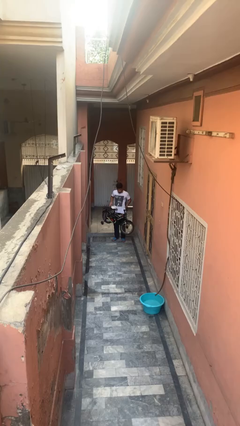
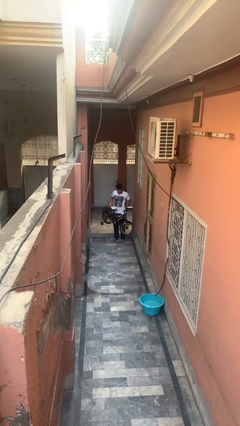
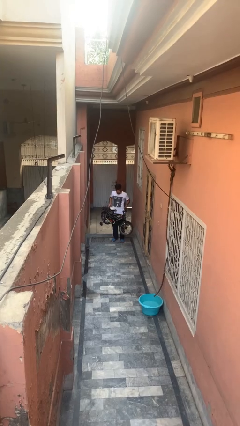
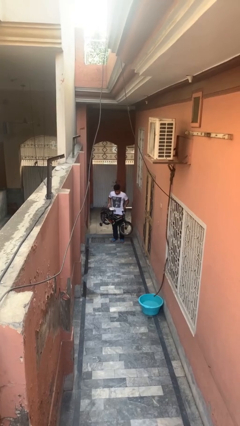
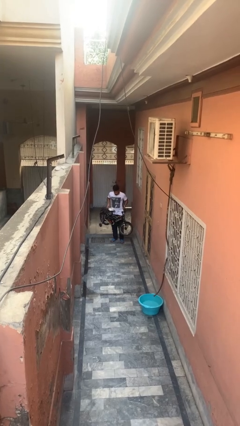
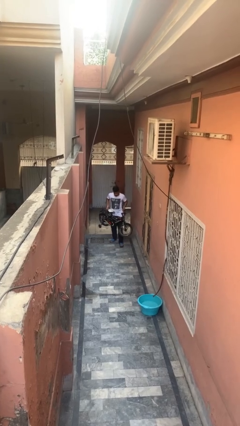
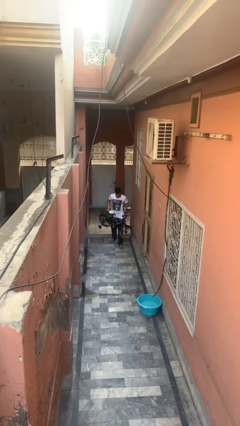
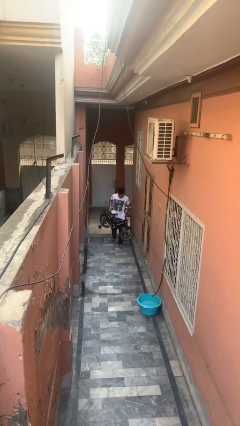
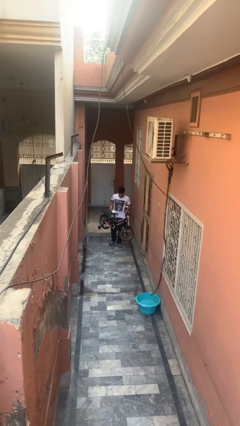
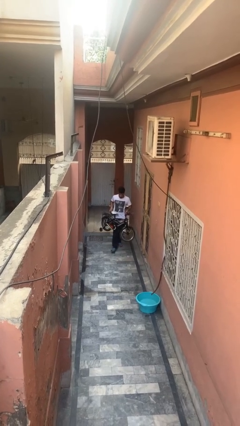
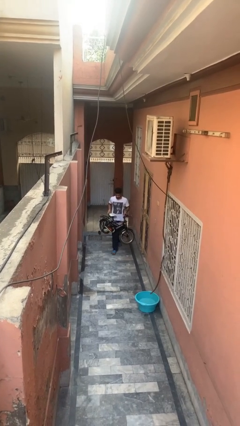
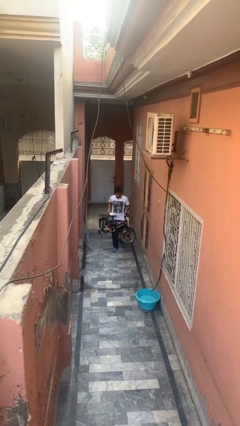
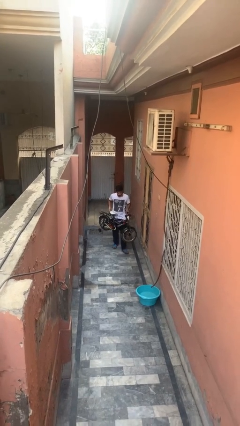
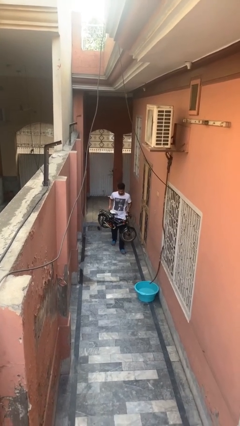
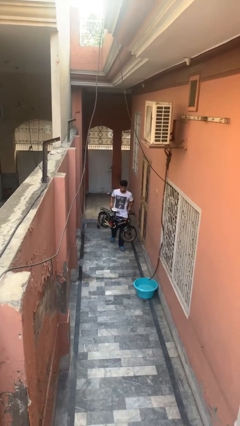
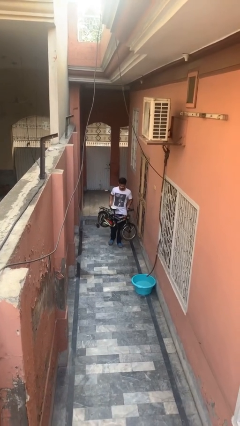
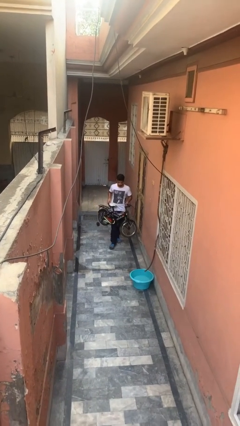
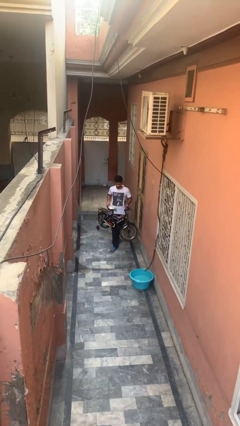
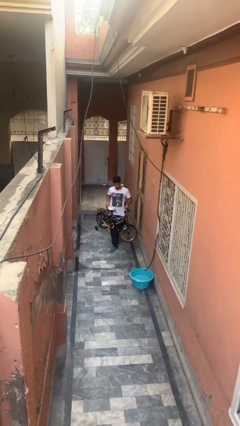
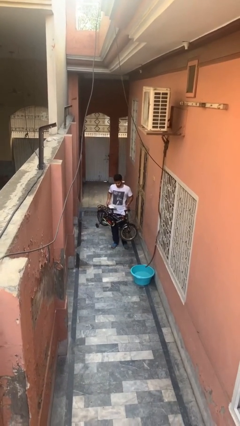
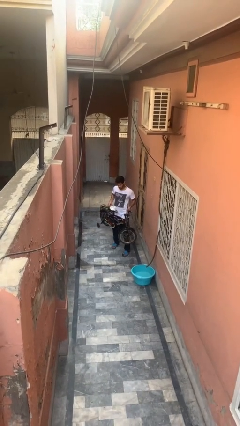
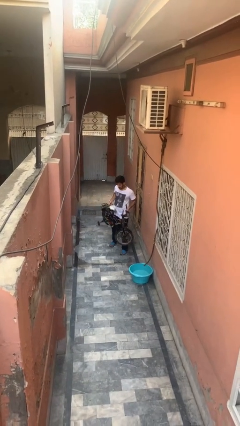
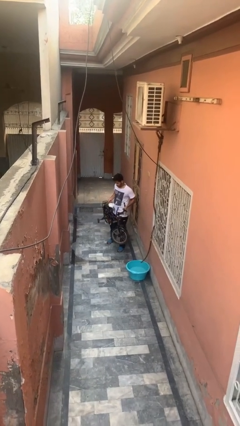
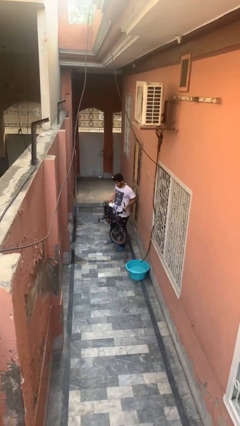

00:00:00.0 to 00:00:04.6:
person carries bicycle

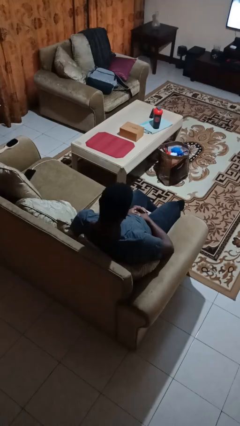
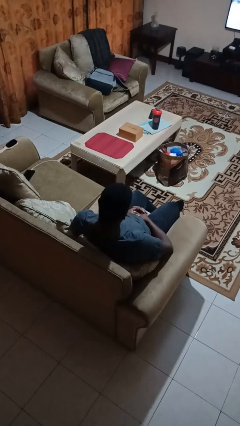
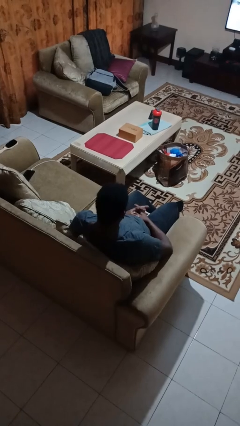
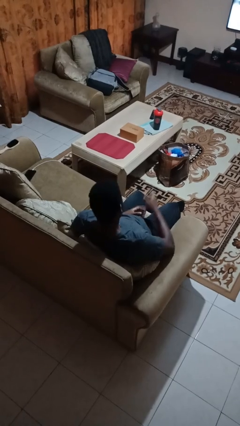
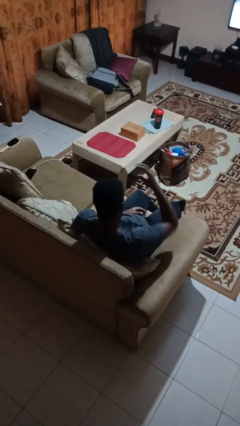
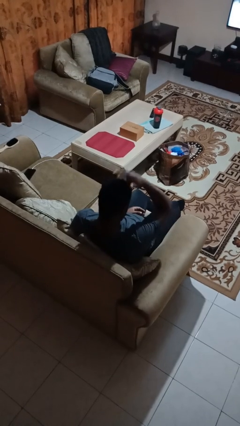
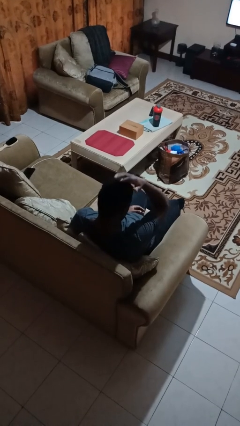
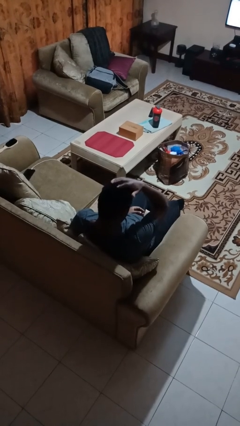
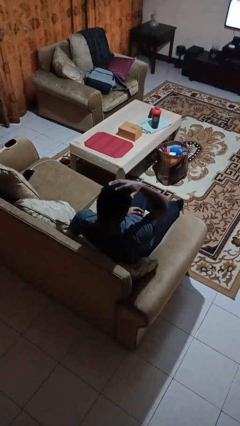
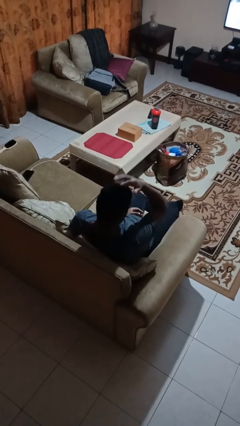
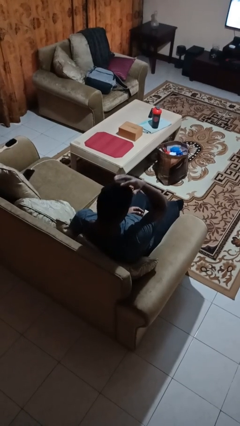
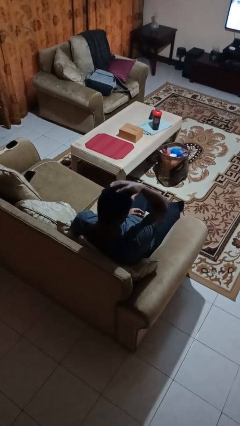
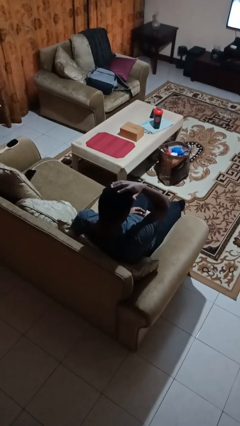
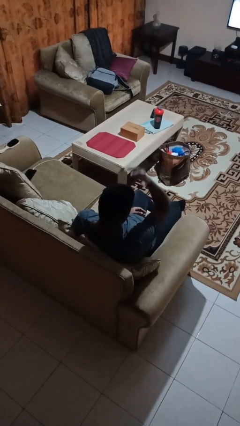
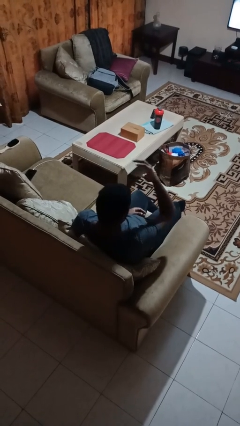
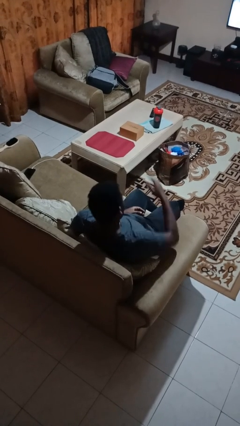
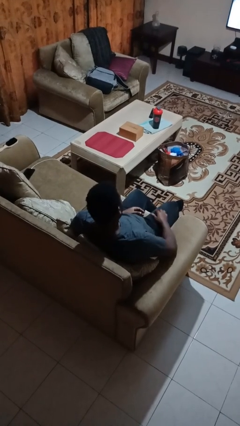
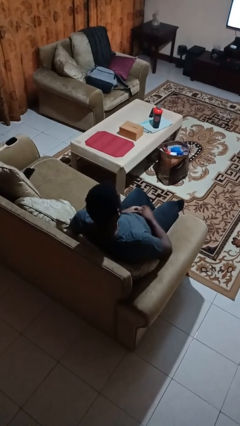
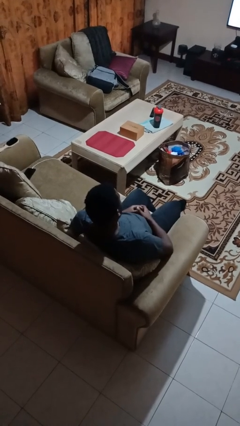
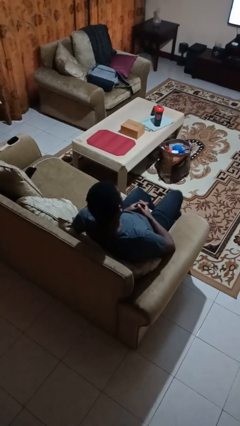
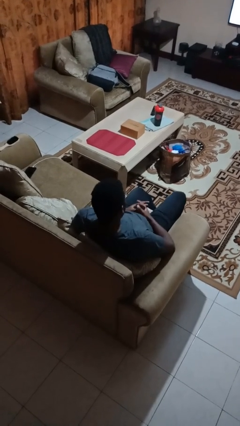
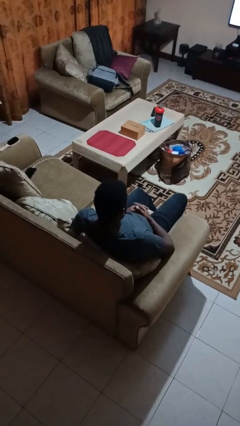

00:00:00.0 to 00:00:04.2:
person pats head

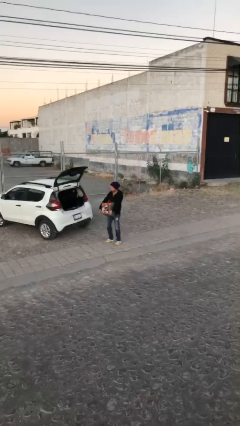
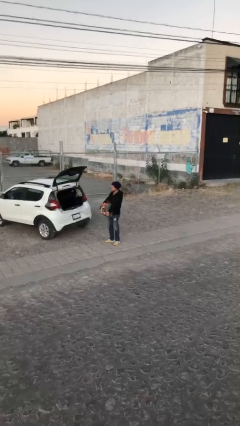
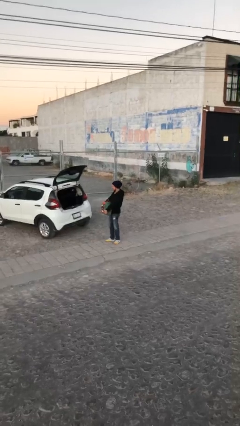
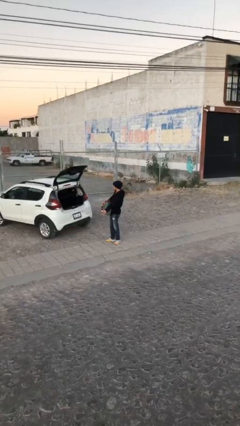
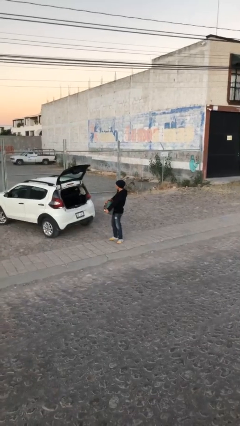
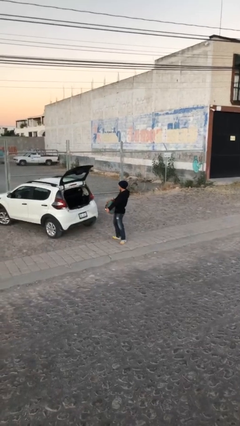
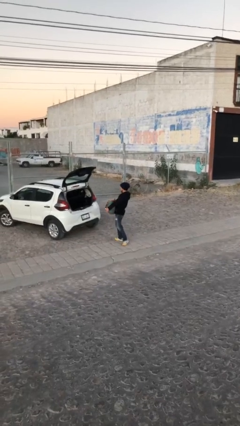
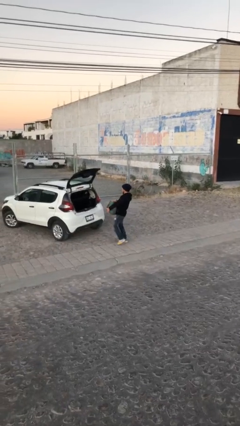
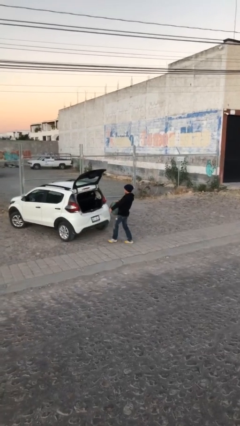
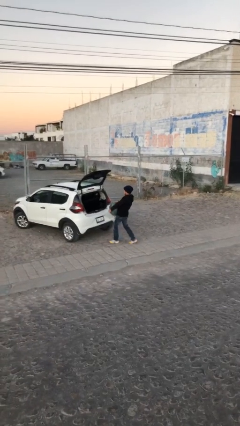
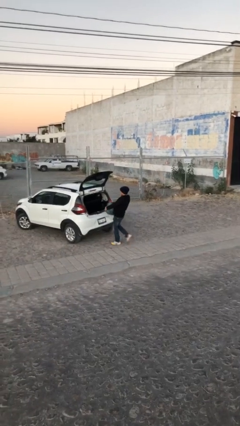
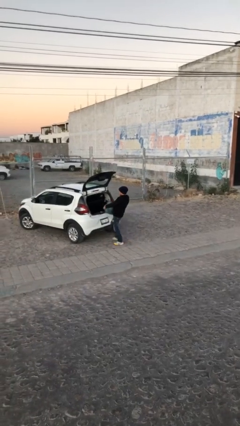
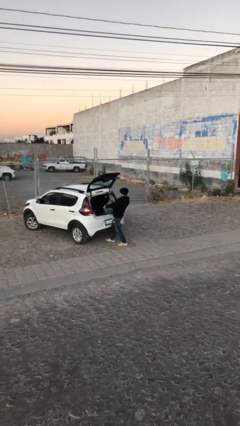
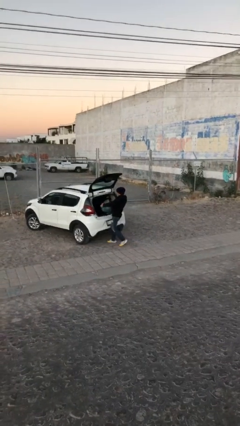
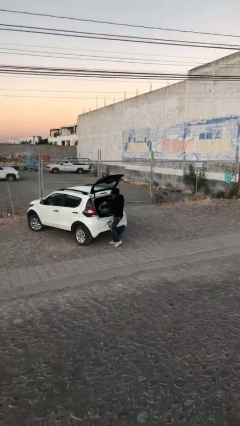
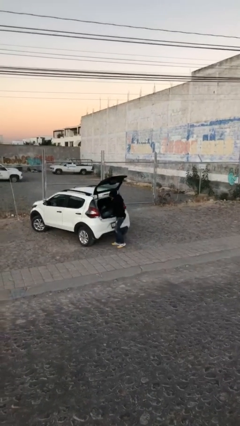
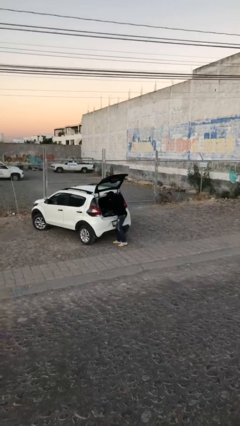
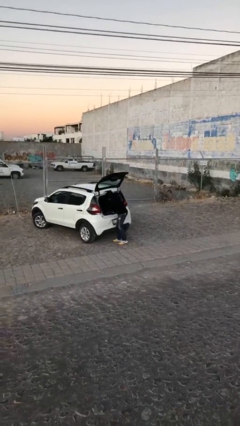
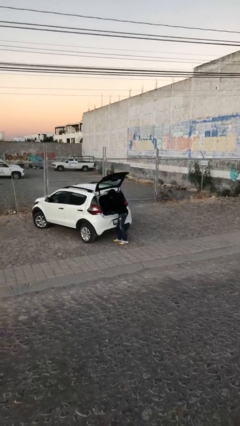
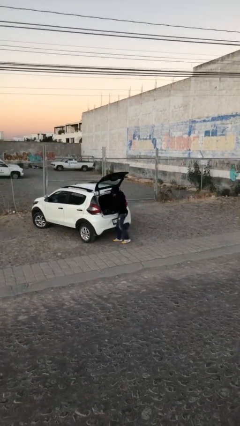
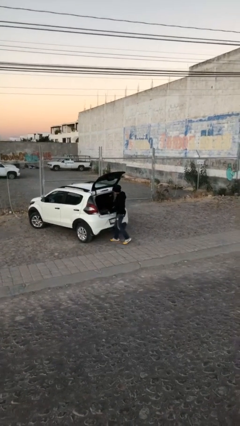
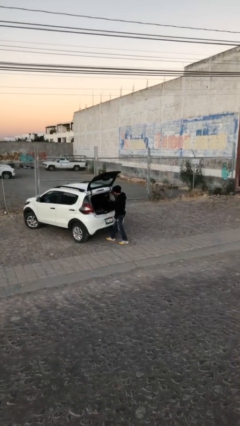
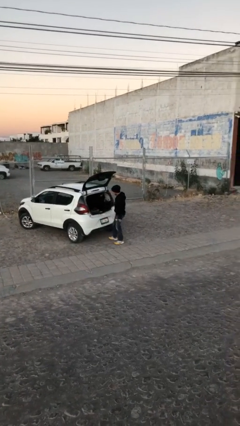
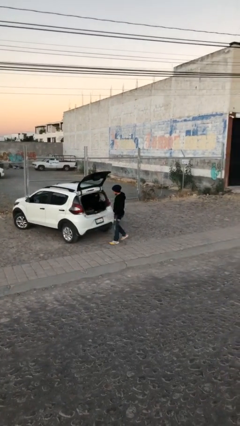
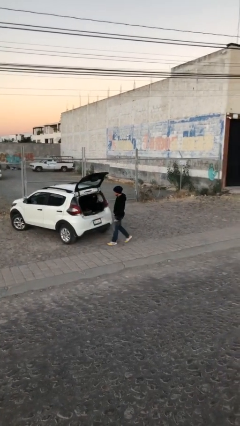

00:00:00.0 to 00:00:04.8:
person loads car

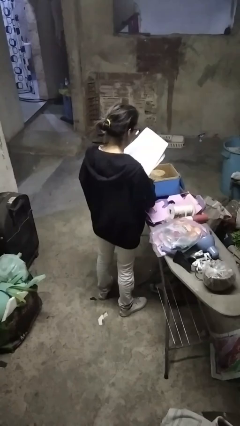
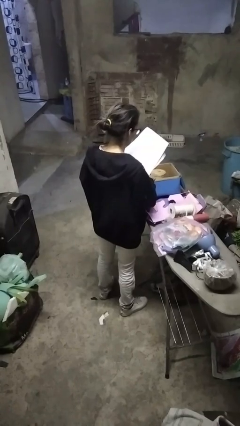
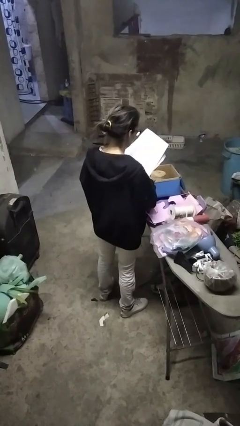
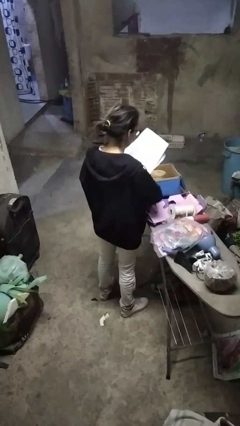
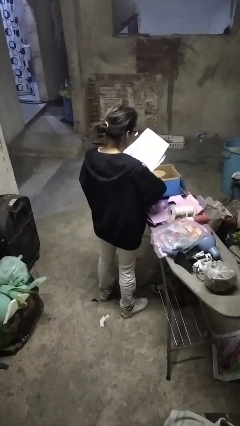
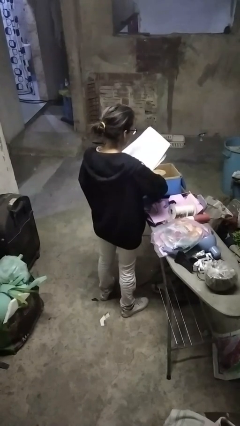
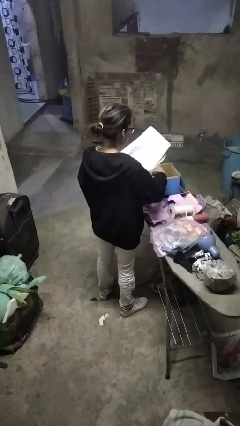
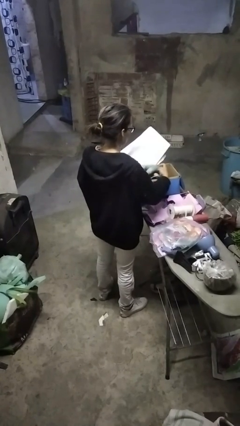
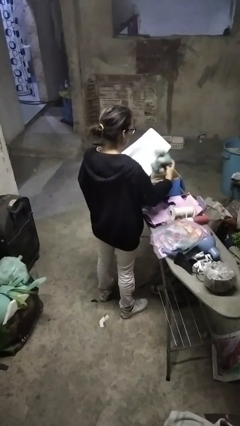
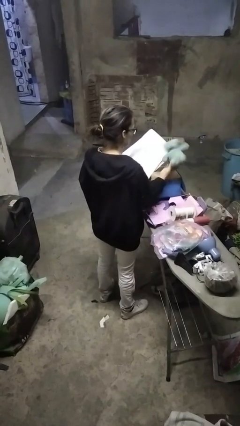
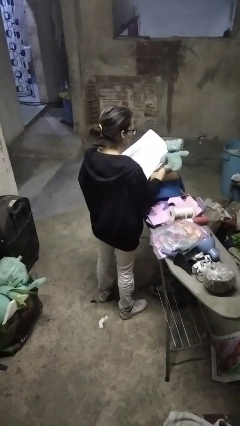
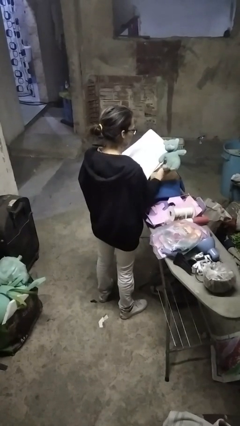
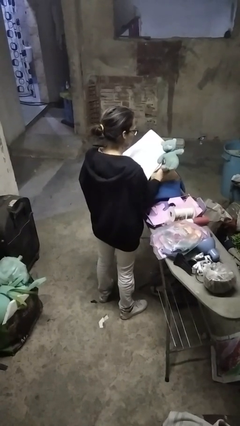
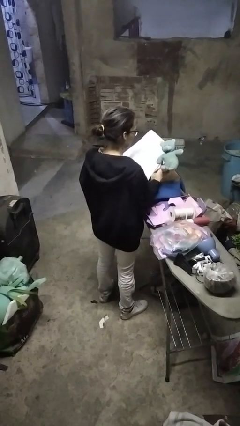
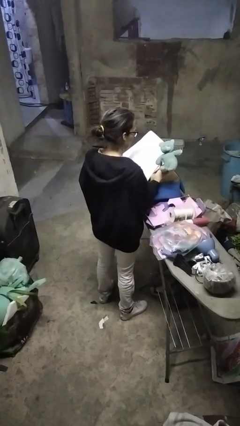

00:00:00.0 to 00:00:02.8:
person takes object from box

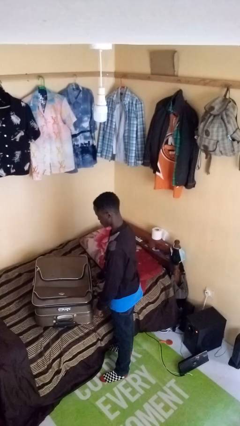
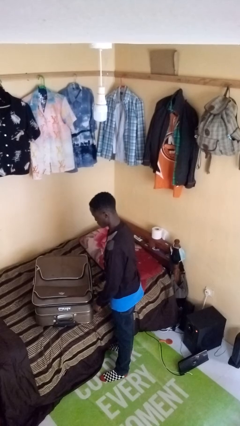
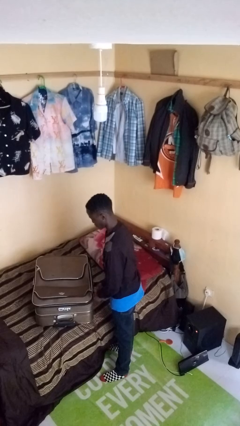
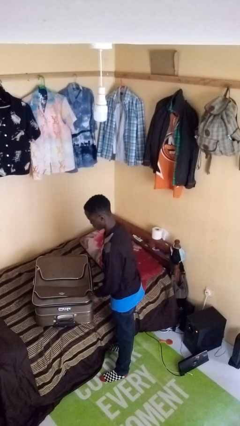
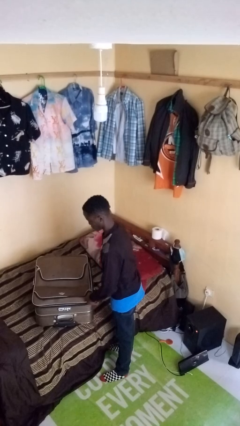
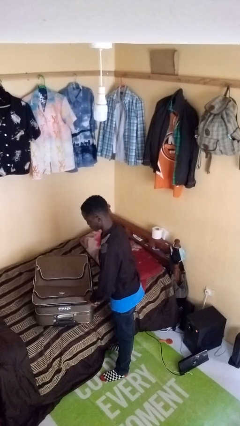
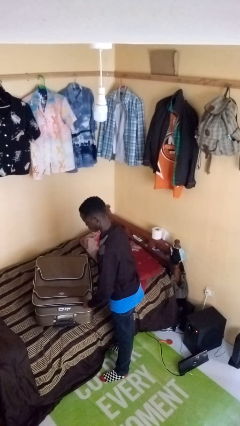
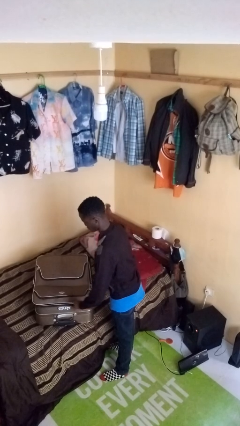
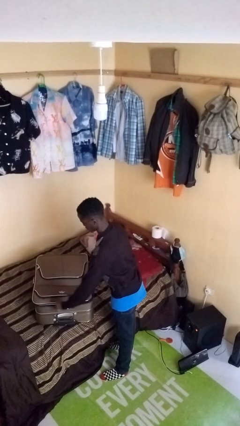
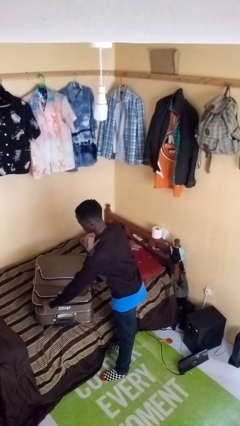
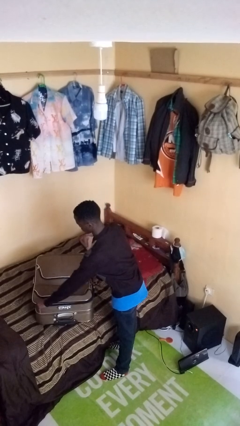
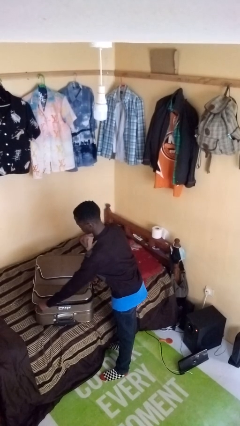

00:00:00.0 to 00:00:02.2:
person opens suitcase
